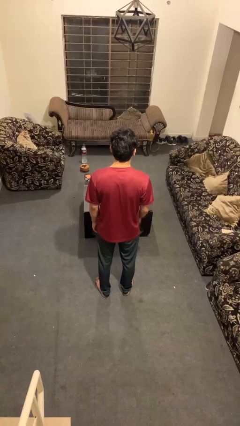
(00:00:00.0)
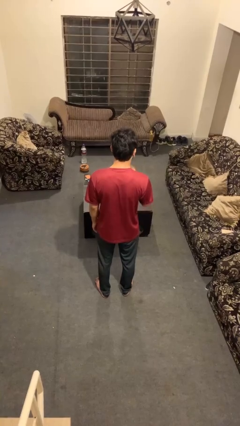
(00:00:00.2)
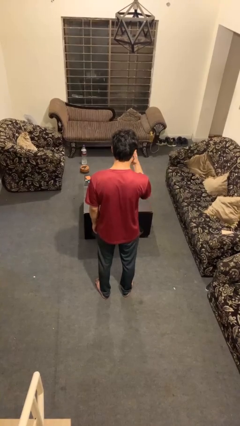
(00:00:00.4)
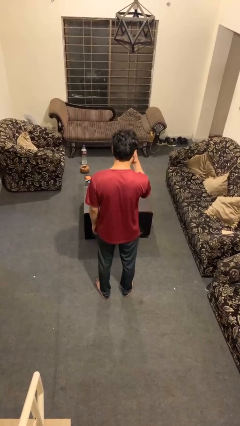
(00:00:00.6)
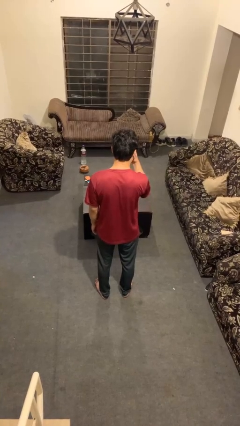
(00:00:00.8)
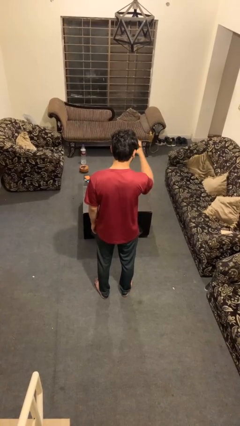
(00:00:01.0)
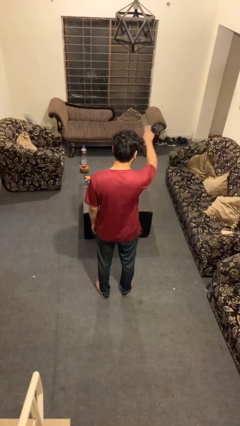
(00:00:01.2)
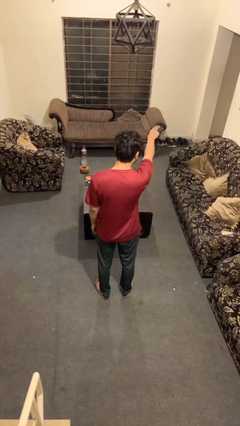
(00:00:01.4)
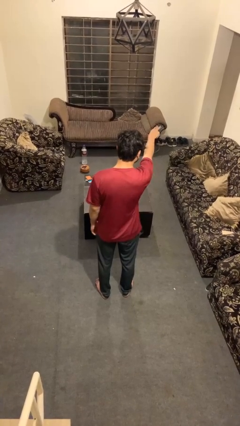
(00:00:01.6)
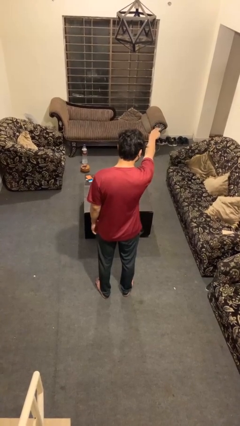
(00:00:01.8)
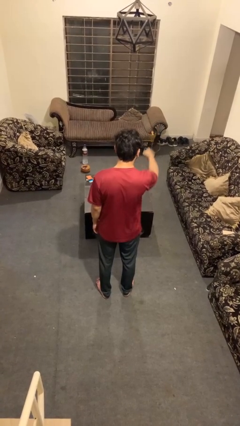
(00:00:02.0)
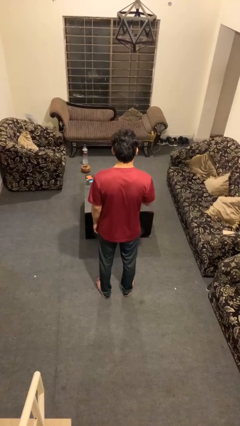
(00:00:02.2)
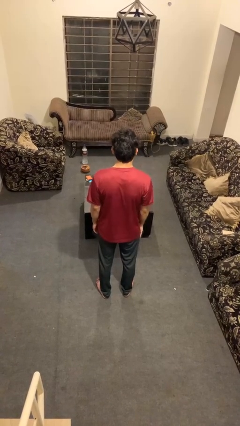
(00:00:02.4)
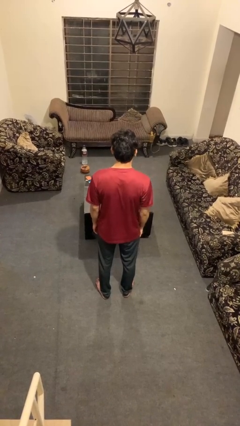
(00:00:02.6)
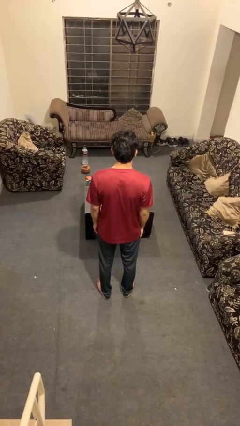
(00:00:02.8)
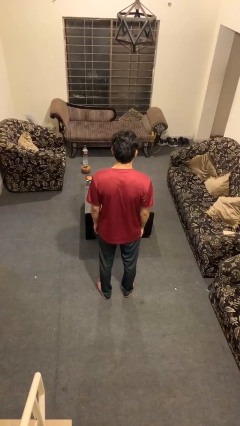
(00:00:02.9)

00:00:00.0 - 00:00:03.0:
person gestures watch closely

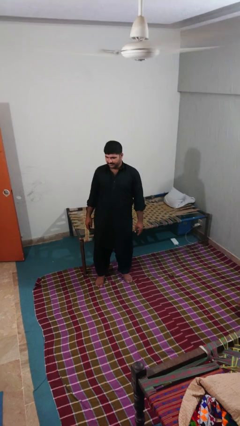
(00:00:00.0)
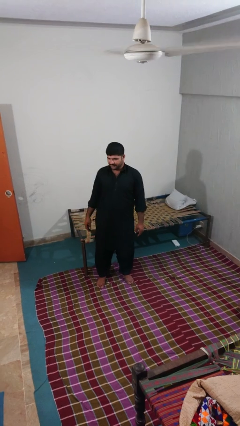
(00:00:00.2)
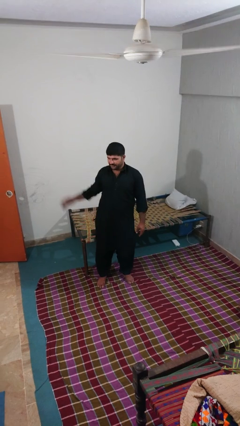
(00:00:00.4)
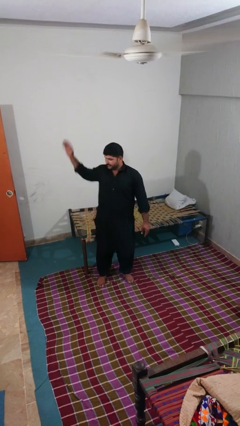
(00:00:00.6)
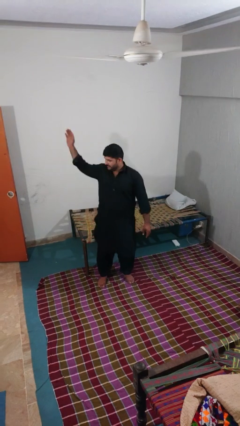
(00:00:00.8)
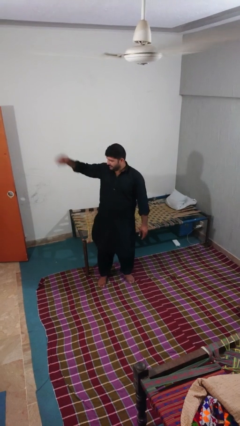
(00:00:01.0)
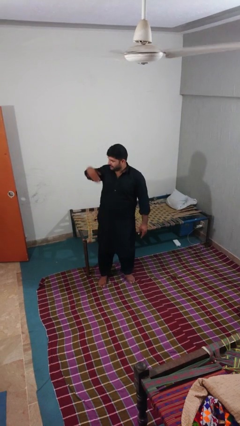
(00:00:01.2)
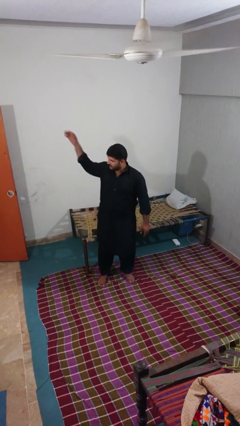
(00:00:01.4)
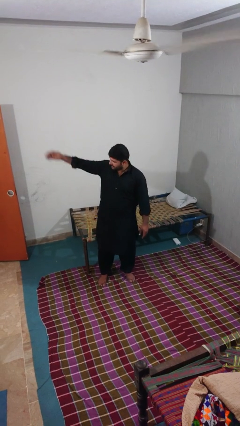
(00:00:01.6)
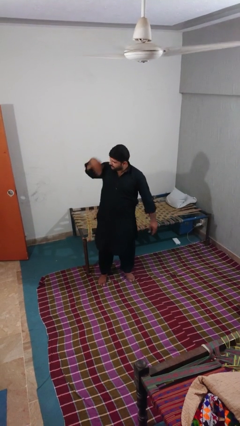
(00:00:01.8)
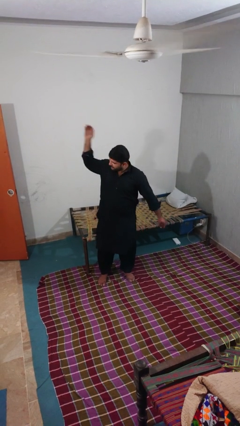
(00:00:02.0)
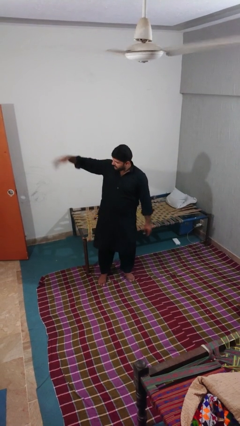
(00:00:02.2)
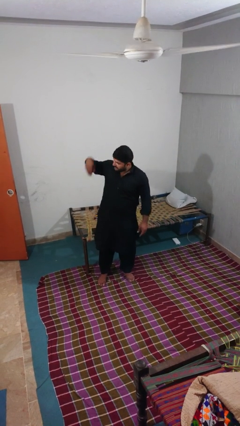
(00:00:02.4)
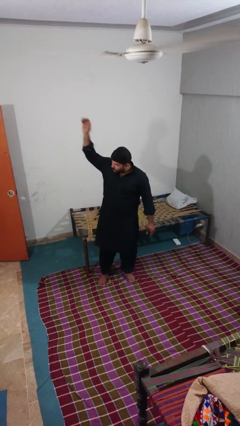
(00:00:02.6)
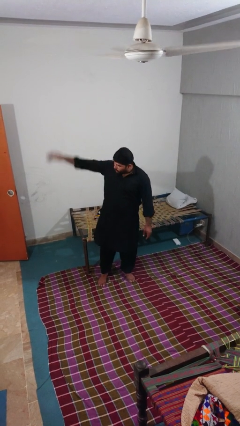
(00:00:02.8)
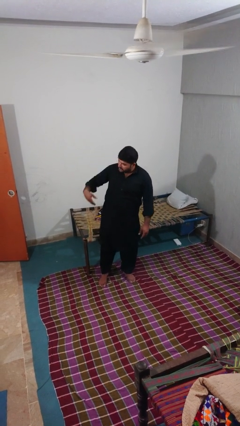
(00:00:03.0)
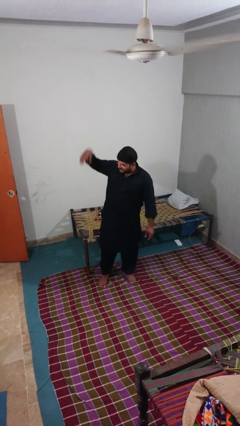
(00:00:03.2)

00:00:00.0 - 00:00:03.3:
person gestures come here

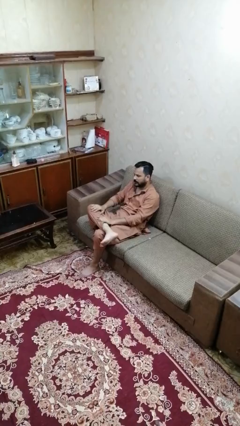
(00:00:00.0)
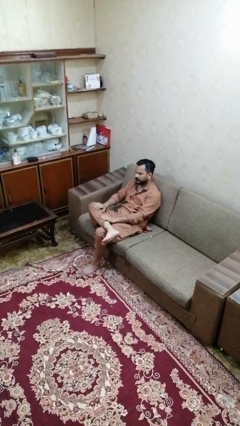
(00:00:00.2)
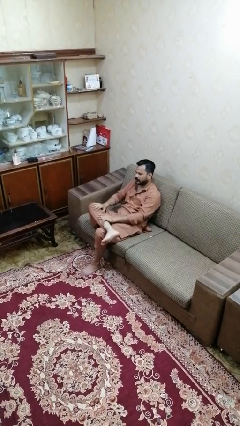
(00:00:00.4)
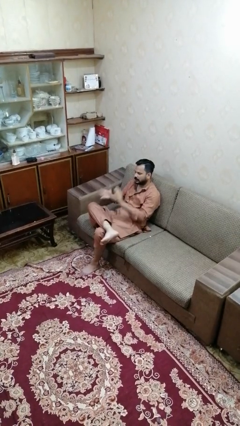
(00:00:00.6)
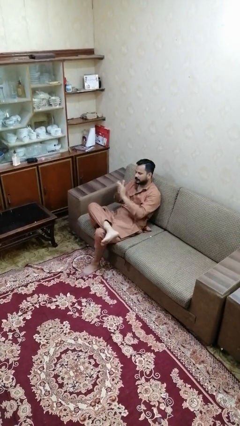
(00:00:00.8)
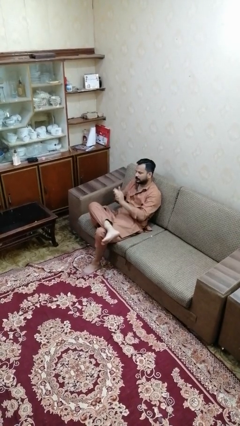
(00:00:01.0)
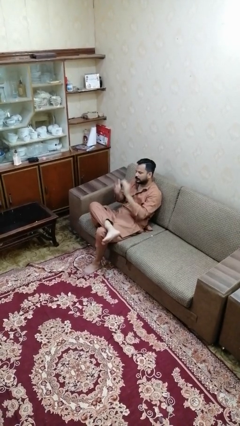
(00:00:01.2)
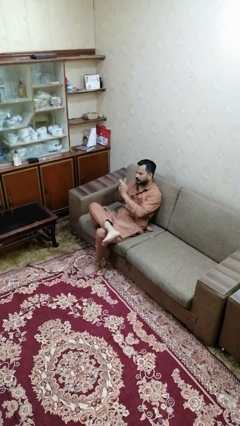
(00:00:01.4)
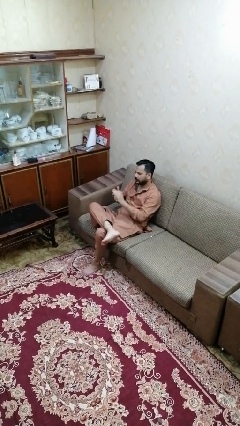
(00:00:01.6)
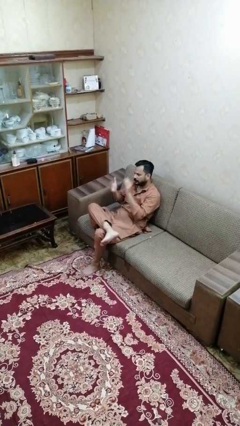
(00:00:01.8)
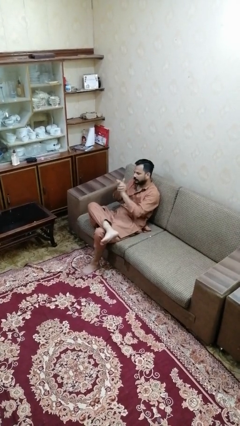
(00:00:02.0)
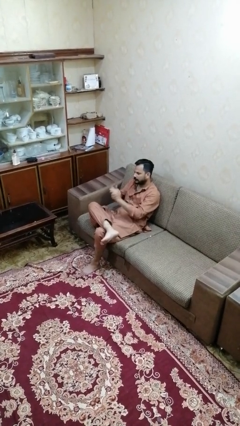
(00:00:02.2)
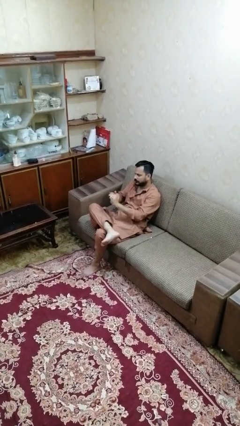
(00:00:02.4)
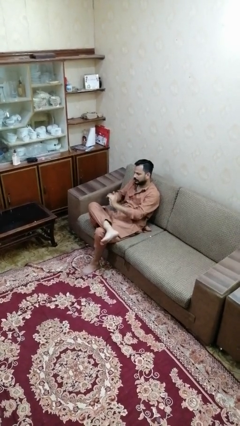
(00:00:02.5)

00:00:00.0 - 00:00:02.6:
person claps hands

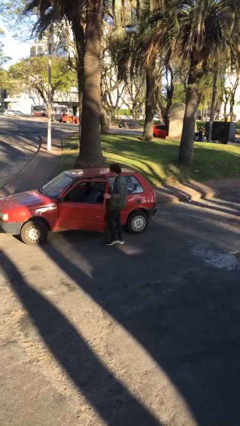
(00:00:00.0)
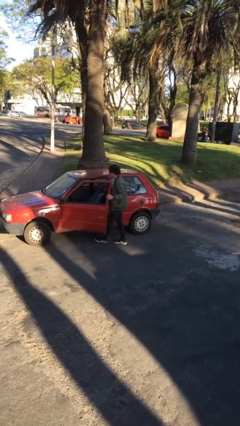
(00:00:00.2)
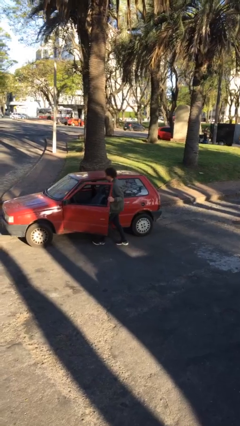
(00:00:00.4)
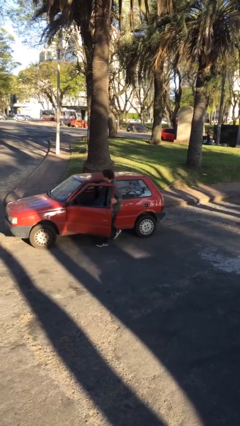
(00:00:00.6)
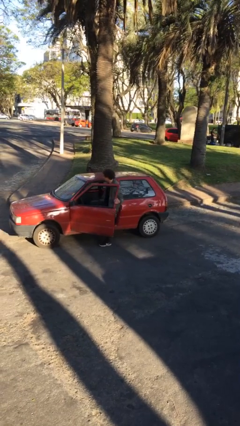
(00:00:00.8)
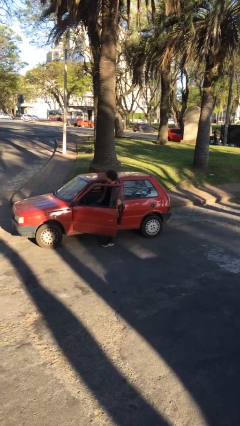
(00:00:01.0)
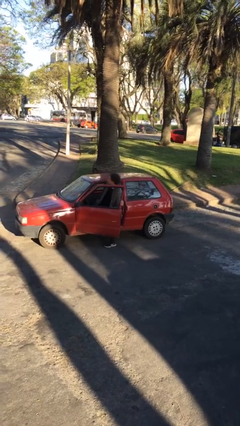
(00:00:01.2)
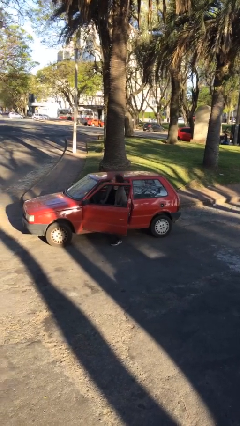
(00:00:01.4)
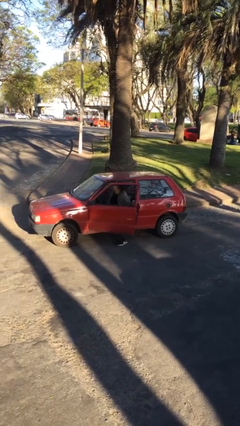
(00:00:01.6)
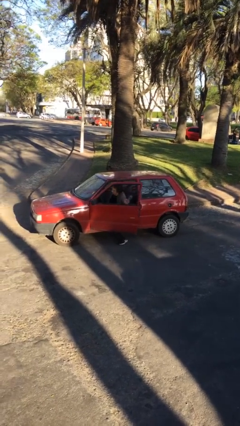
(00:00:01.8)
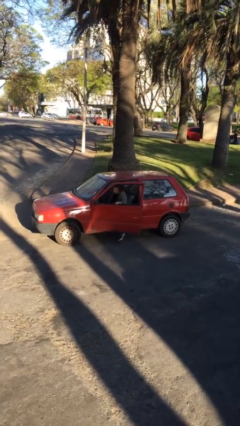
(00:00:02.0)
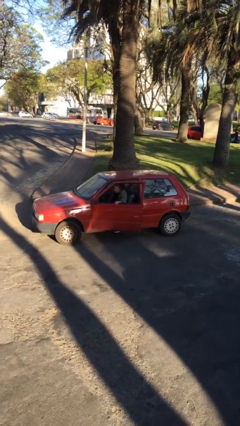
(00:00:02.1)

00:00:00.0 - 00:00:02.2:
person enters car

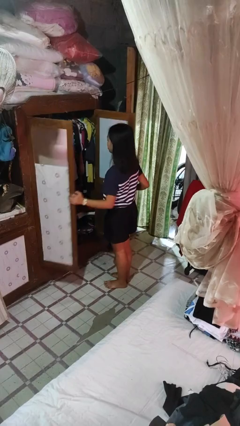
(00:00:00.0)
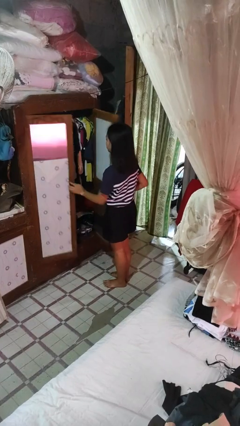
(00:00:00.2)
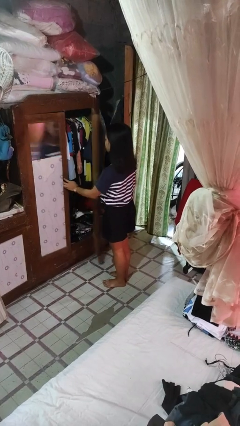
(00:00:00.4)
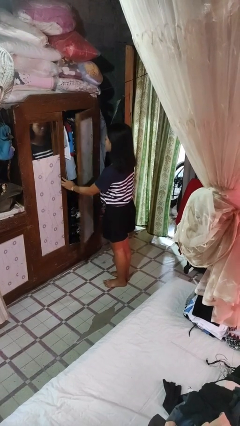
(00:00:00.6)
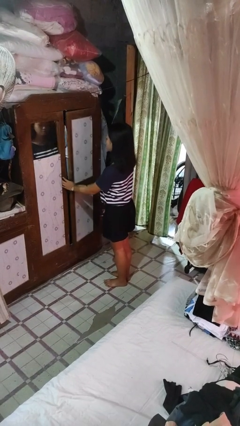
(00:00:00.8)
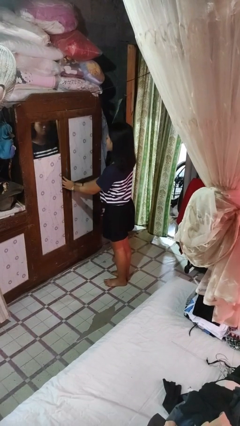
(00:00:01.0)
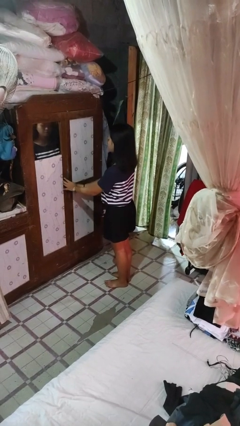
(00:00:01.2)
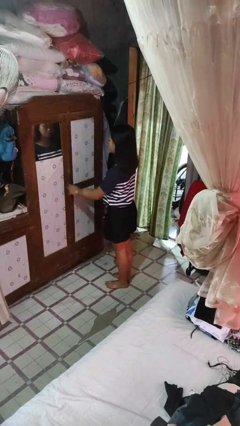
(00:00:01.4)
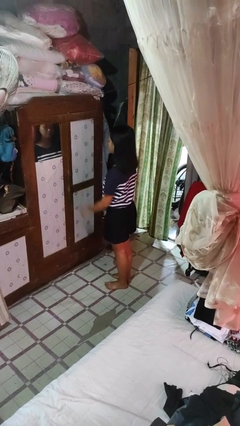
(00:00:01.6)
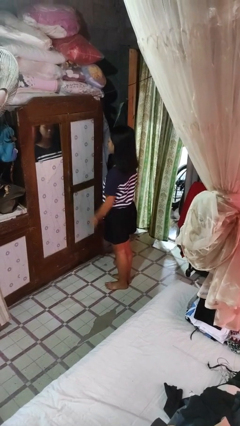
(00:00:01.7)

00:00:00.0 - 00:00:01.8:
person closes closet door

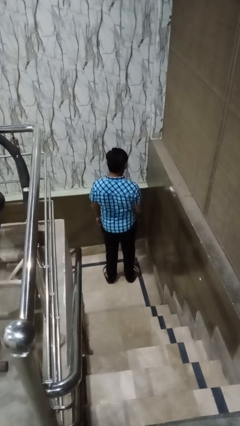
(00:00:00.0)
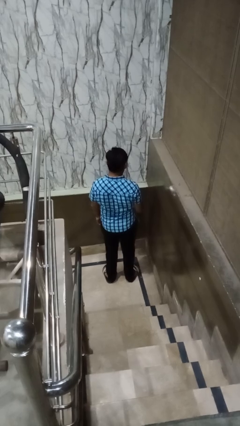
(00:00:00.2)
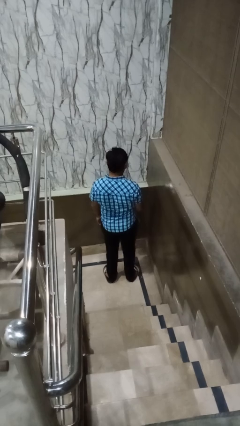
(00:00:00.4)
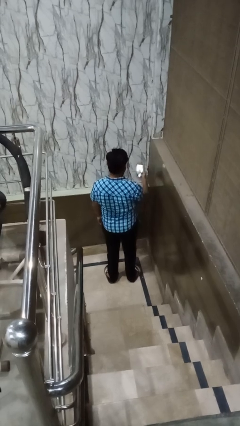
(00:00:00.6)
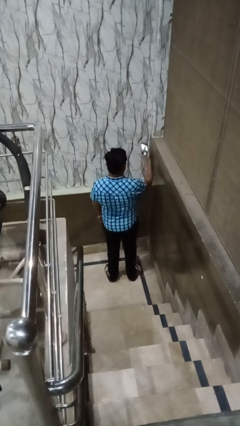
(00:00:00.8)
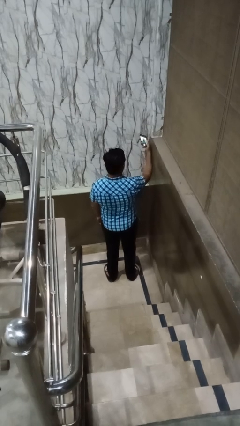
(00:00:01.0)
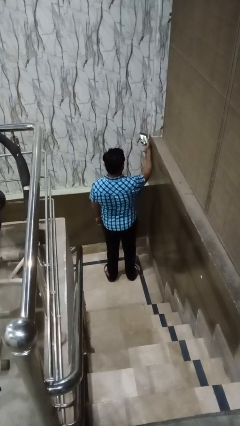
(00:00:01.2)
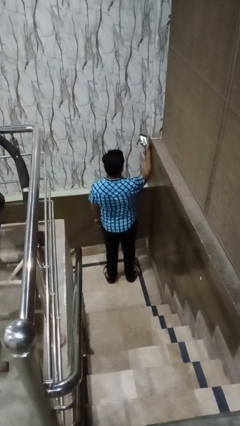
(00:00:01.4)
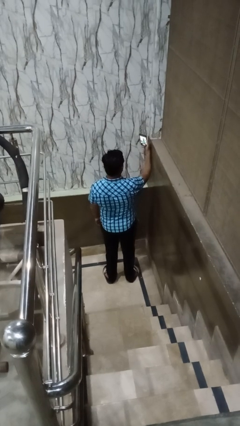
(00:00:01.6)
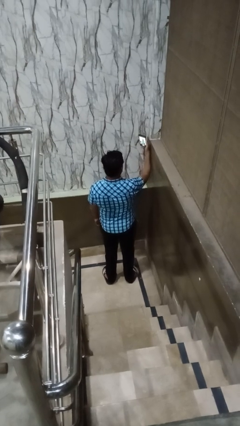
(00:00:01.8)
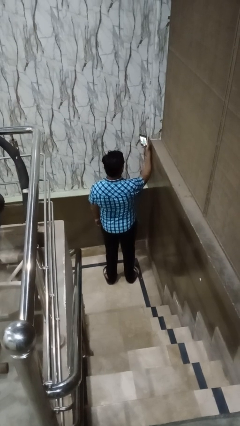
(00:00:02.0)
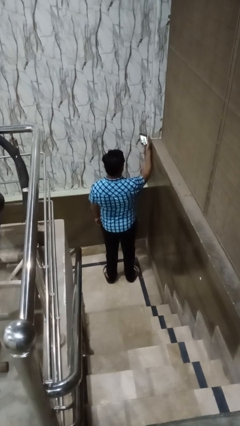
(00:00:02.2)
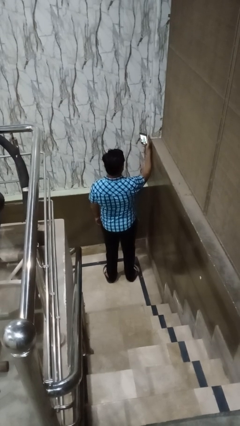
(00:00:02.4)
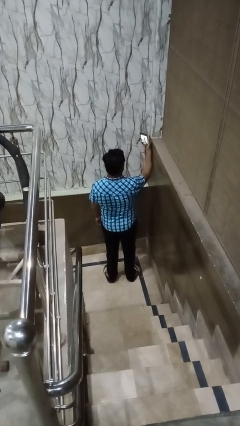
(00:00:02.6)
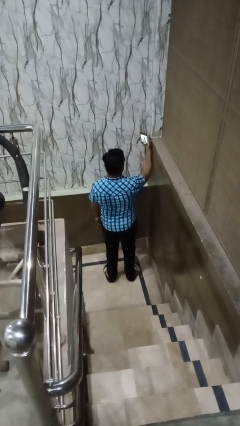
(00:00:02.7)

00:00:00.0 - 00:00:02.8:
person takes selfie

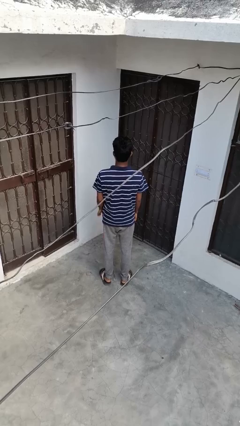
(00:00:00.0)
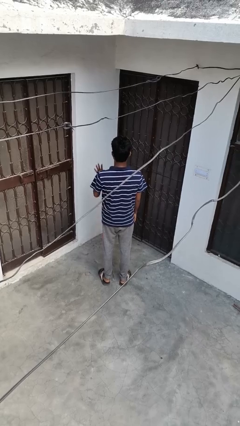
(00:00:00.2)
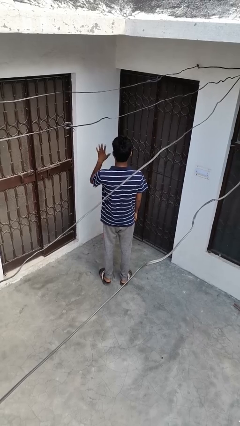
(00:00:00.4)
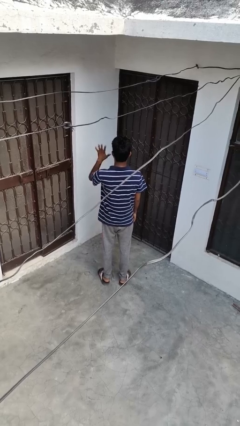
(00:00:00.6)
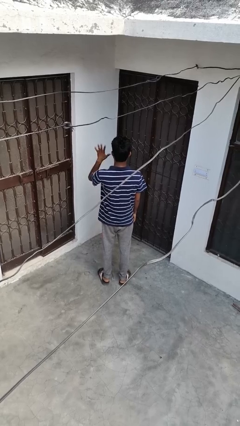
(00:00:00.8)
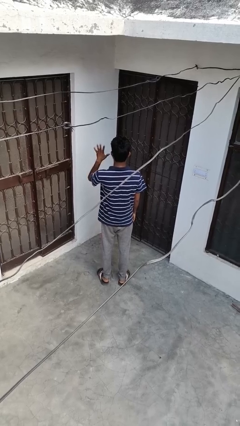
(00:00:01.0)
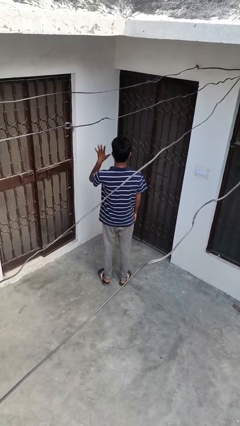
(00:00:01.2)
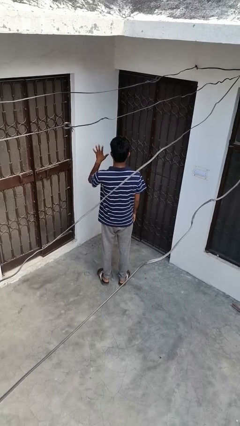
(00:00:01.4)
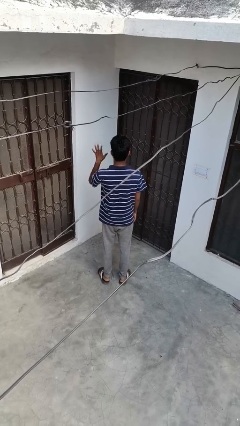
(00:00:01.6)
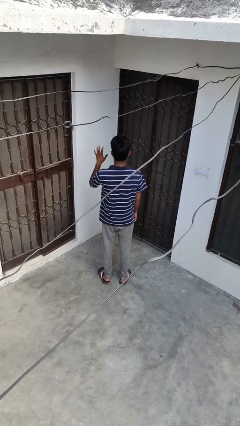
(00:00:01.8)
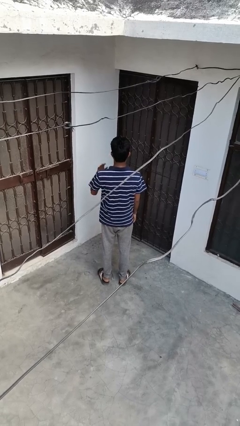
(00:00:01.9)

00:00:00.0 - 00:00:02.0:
person gestures number five
